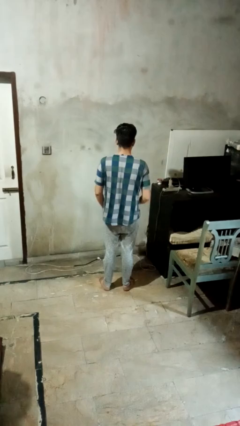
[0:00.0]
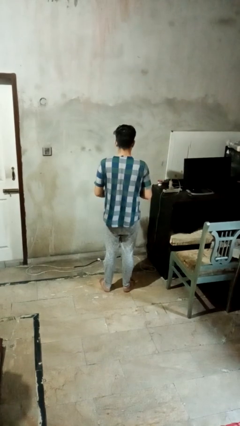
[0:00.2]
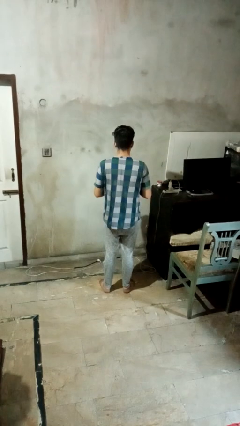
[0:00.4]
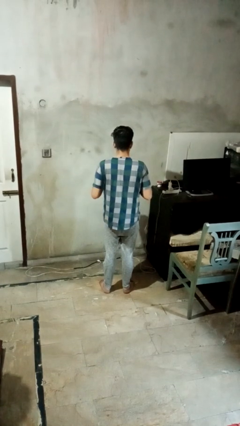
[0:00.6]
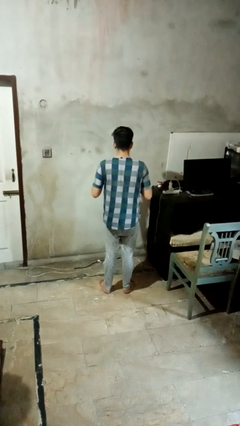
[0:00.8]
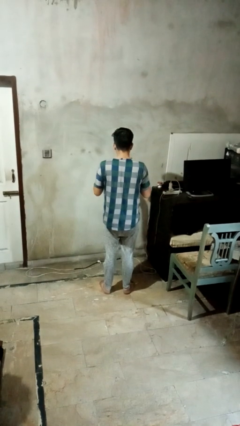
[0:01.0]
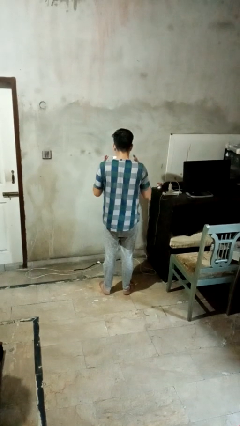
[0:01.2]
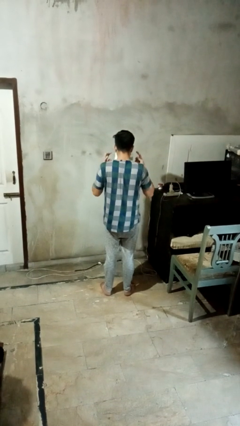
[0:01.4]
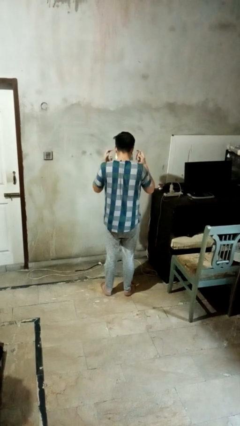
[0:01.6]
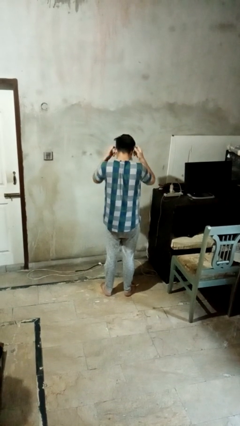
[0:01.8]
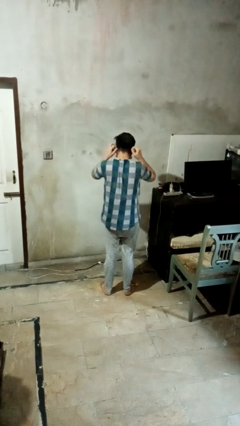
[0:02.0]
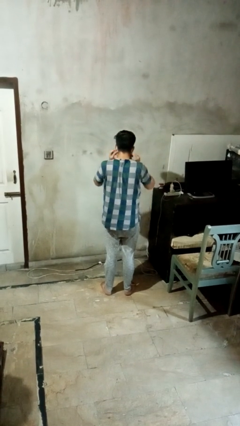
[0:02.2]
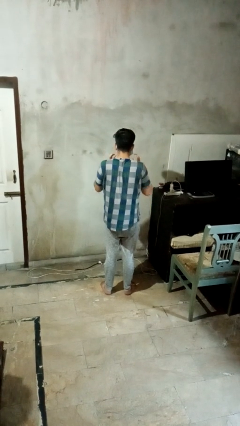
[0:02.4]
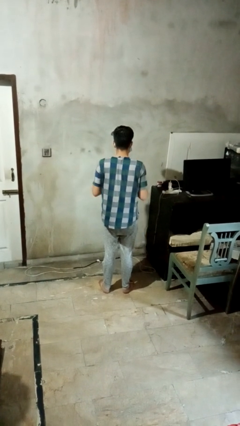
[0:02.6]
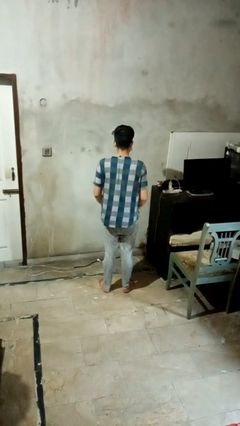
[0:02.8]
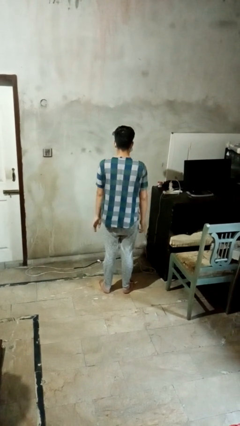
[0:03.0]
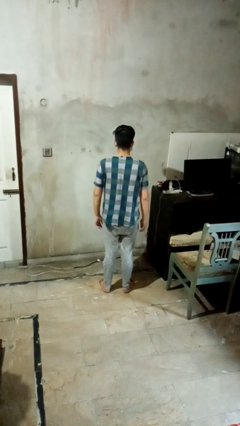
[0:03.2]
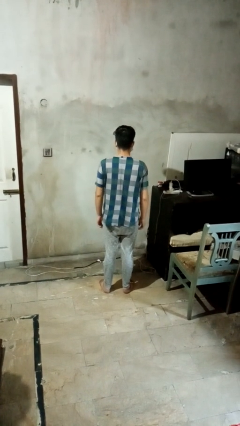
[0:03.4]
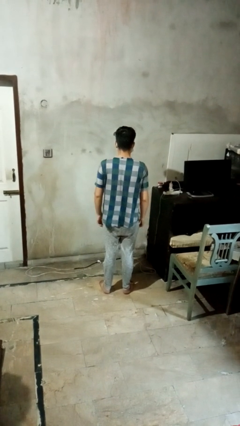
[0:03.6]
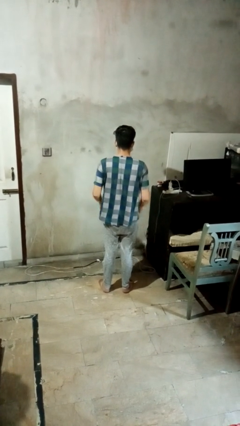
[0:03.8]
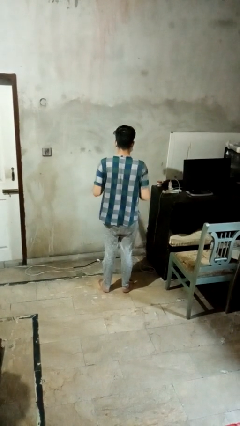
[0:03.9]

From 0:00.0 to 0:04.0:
person puts on facemask

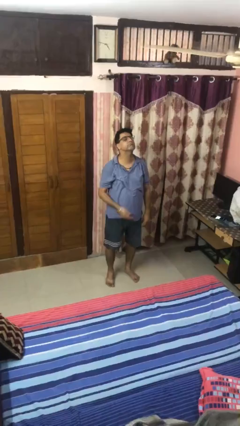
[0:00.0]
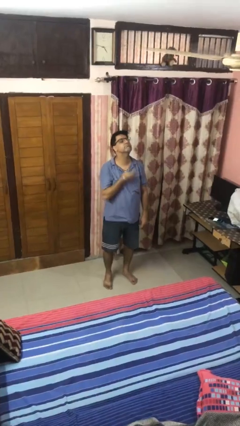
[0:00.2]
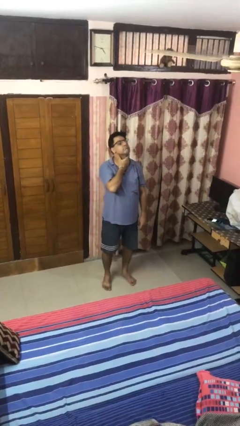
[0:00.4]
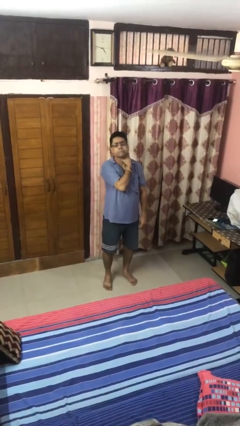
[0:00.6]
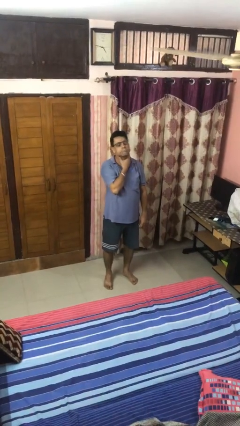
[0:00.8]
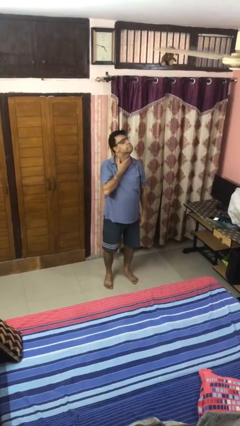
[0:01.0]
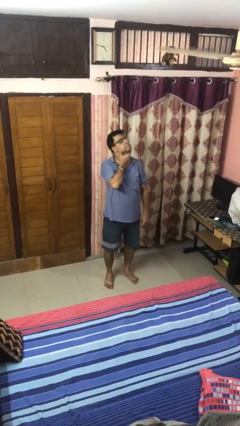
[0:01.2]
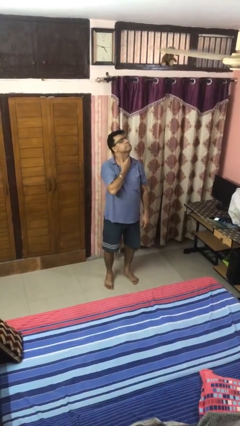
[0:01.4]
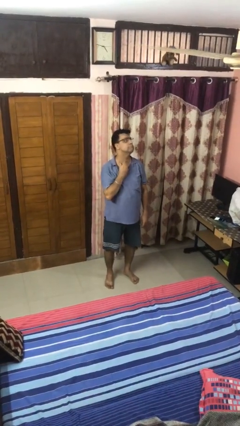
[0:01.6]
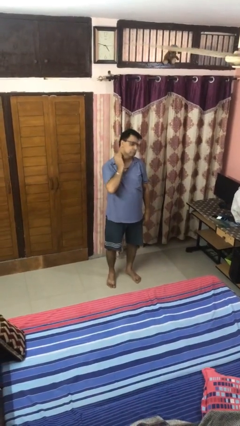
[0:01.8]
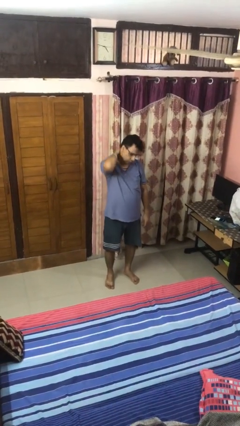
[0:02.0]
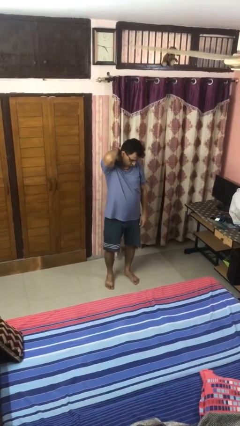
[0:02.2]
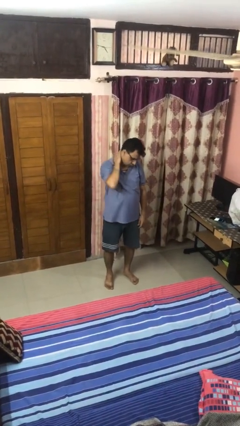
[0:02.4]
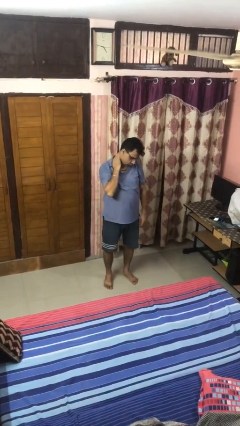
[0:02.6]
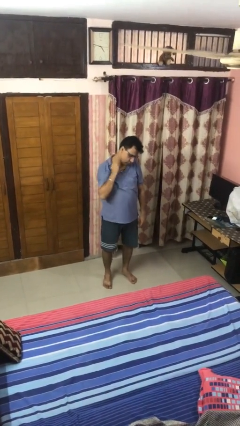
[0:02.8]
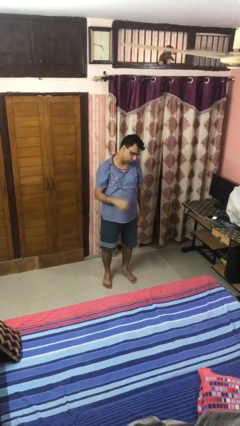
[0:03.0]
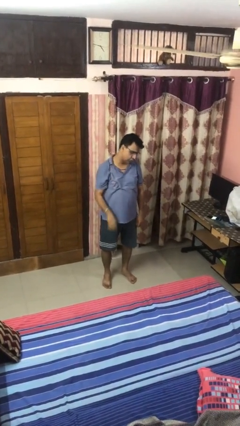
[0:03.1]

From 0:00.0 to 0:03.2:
person rubs neck

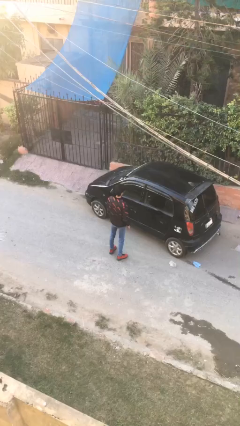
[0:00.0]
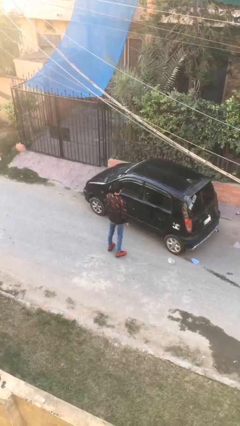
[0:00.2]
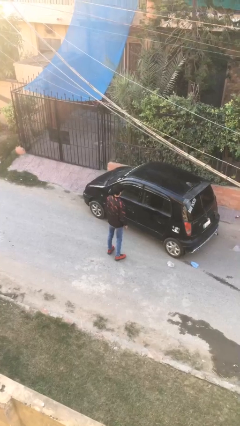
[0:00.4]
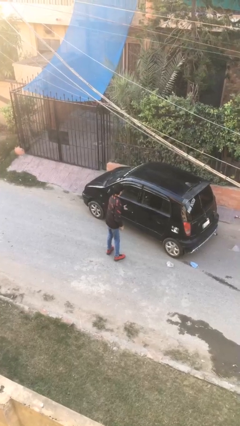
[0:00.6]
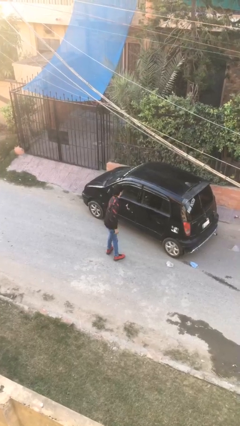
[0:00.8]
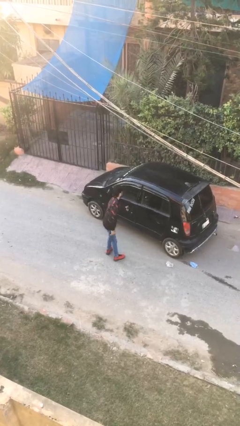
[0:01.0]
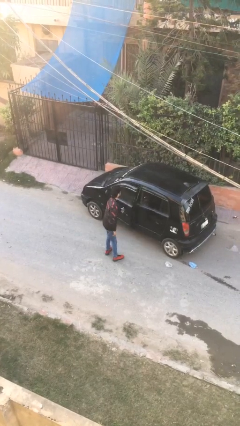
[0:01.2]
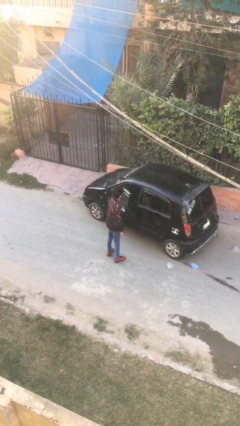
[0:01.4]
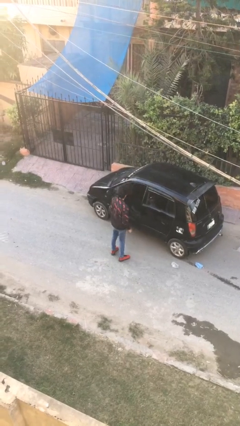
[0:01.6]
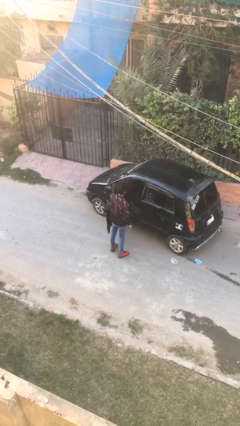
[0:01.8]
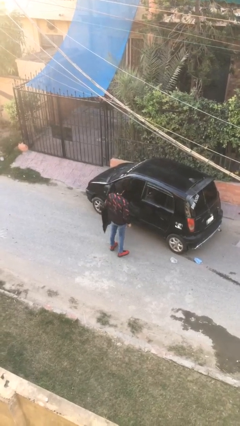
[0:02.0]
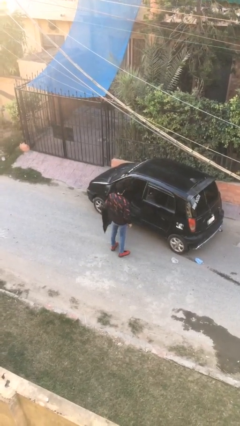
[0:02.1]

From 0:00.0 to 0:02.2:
person opens car door

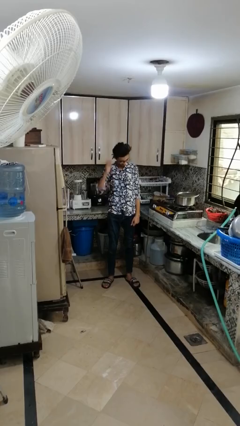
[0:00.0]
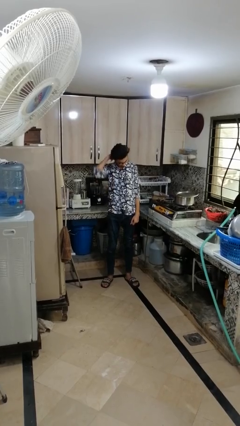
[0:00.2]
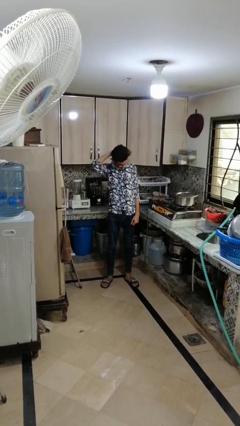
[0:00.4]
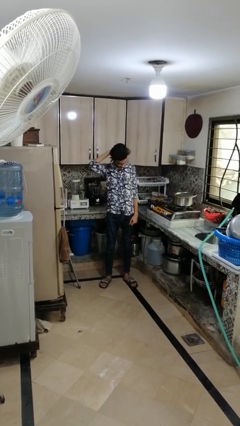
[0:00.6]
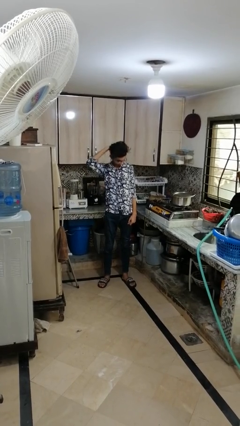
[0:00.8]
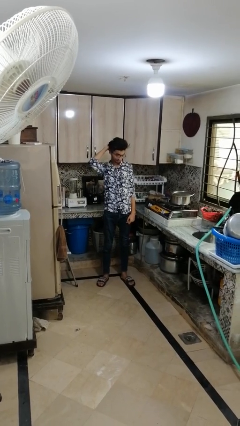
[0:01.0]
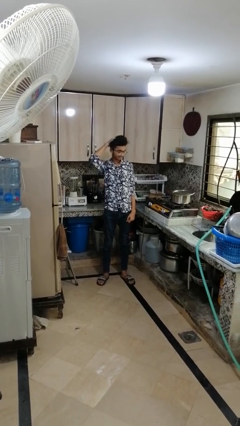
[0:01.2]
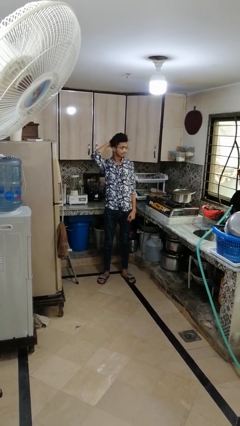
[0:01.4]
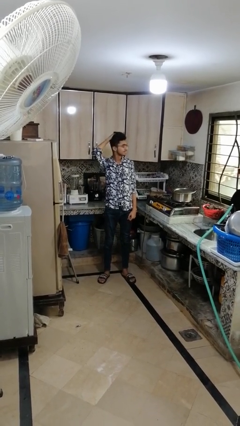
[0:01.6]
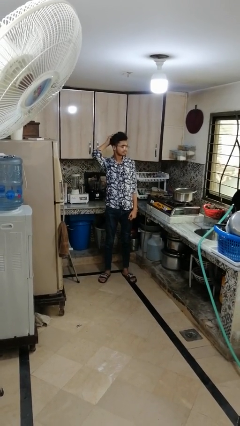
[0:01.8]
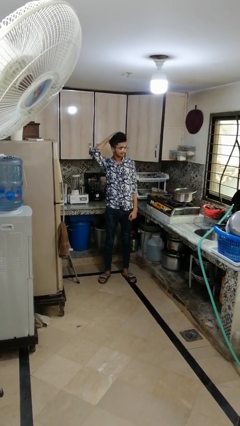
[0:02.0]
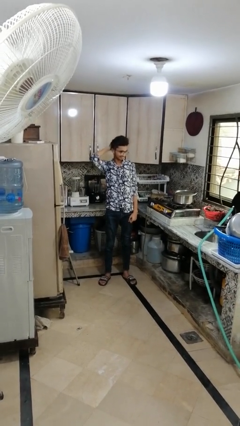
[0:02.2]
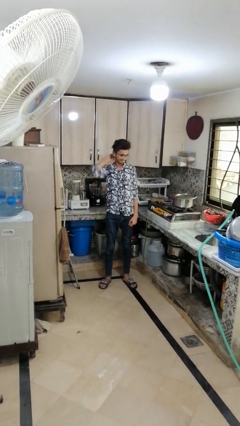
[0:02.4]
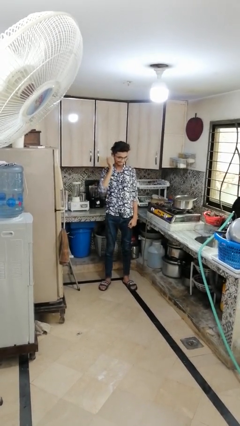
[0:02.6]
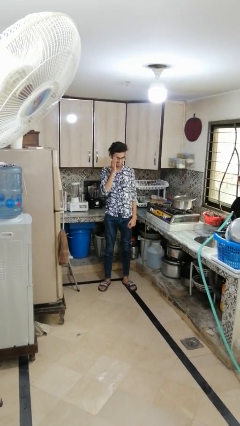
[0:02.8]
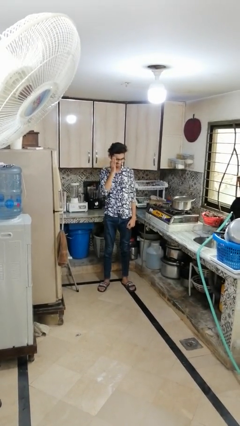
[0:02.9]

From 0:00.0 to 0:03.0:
person strokes hair

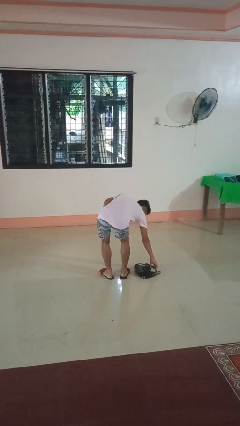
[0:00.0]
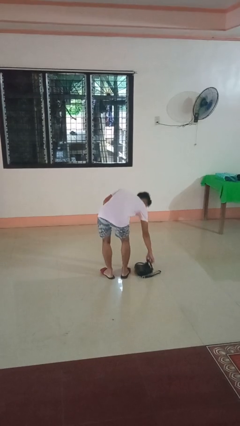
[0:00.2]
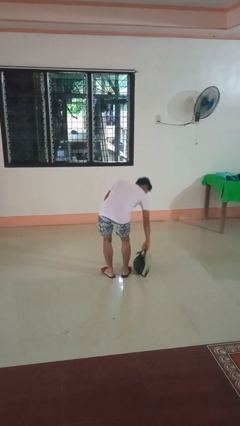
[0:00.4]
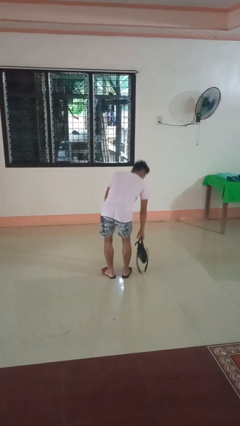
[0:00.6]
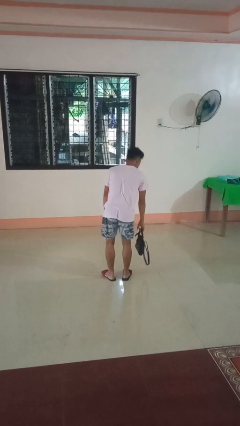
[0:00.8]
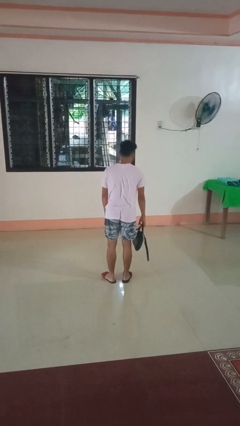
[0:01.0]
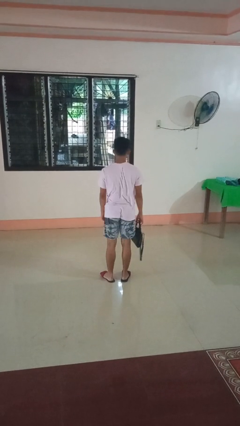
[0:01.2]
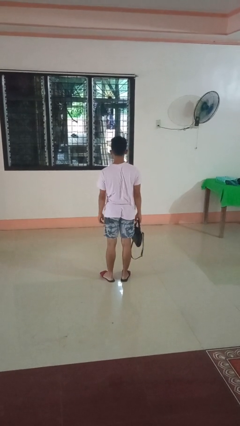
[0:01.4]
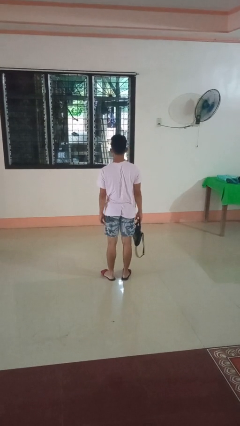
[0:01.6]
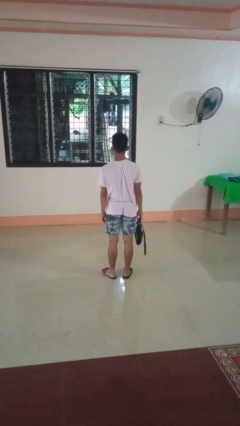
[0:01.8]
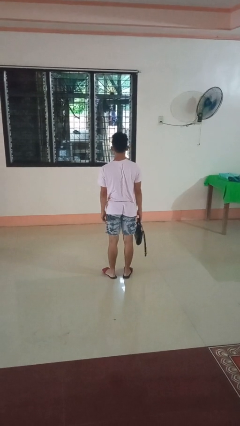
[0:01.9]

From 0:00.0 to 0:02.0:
person picks up object from floor

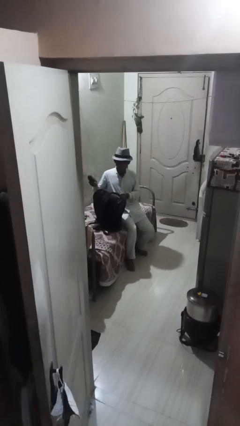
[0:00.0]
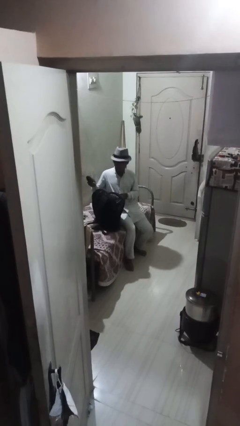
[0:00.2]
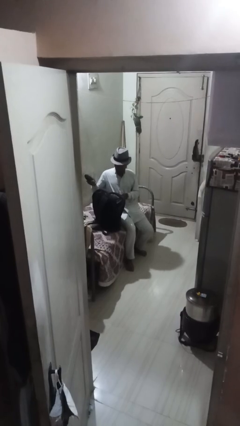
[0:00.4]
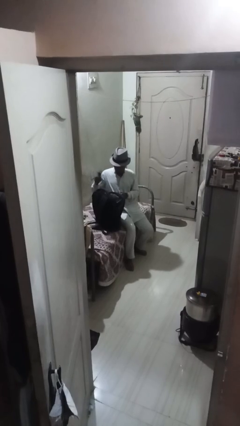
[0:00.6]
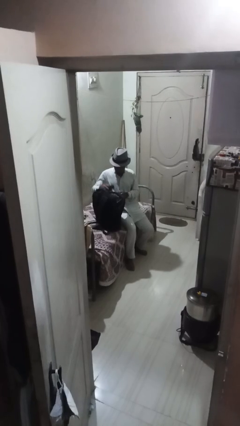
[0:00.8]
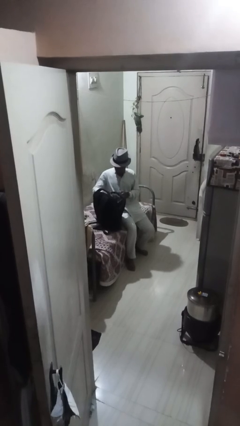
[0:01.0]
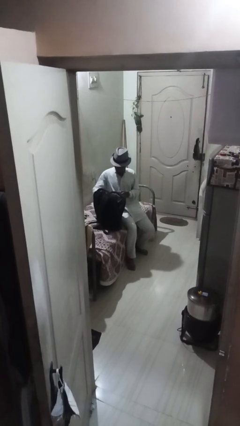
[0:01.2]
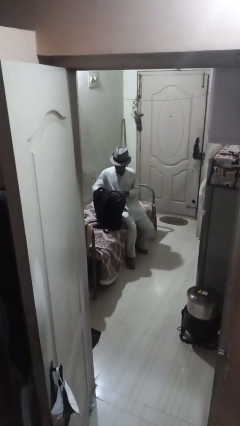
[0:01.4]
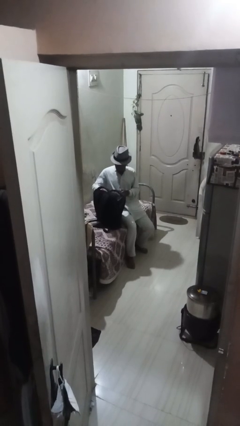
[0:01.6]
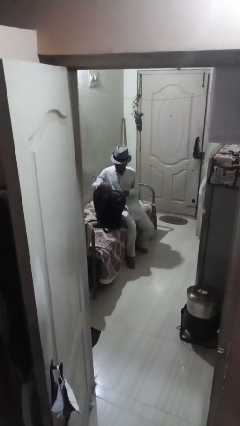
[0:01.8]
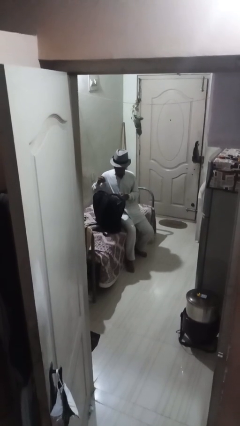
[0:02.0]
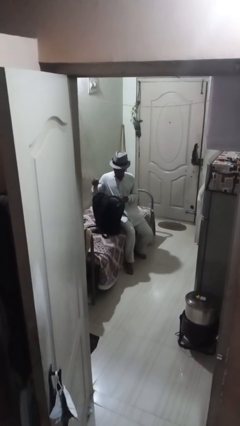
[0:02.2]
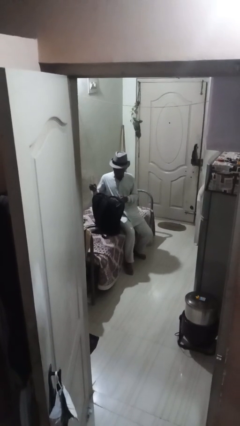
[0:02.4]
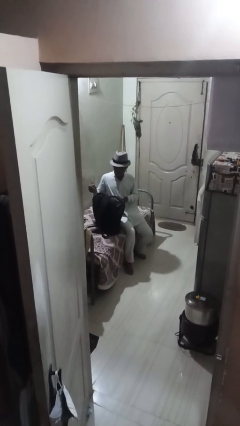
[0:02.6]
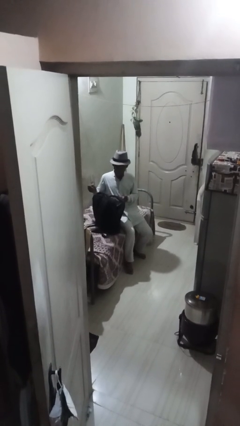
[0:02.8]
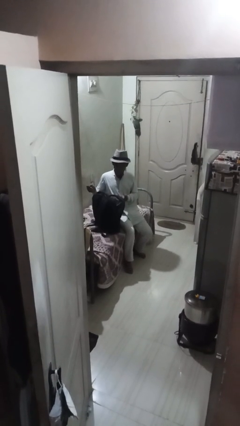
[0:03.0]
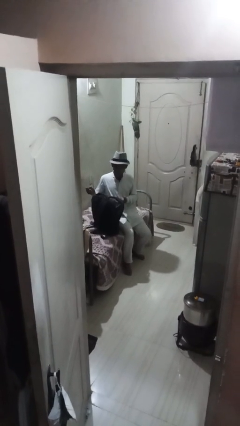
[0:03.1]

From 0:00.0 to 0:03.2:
person puts object into backpack
